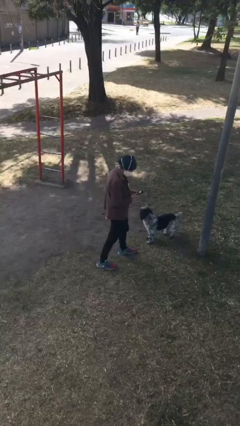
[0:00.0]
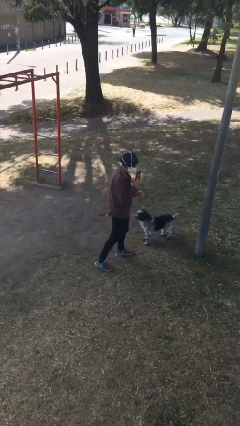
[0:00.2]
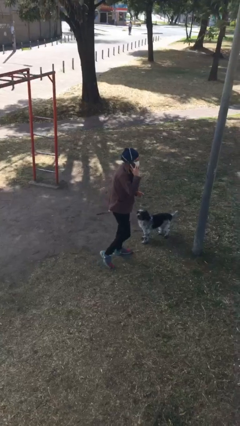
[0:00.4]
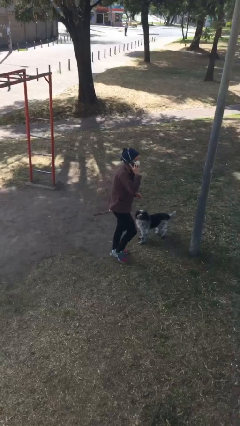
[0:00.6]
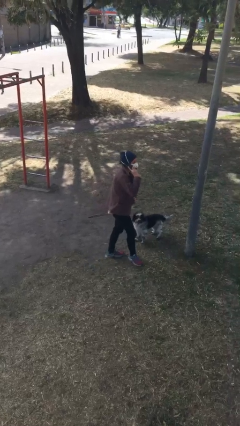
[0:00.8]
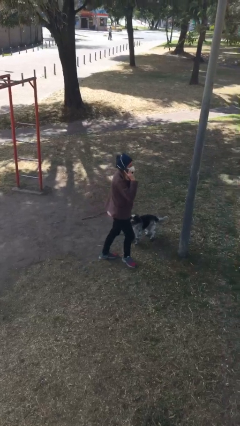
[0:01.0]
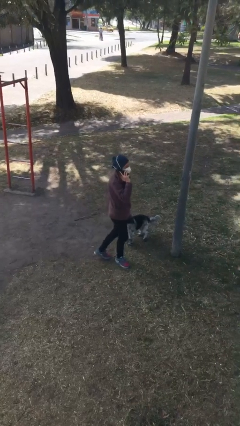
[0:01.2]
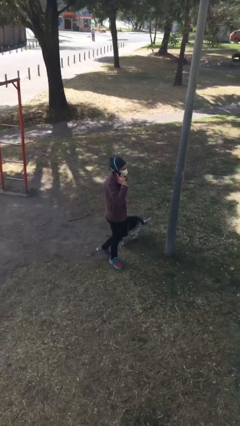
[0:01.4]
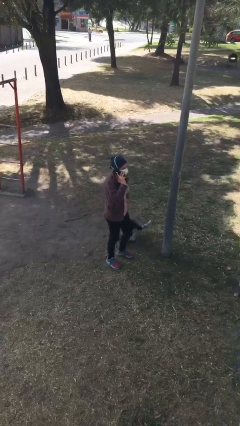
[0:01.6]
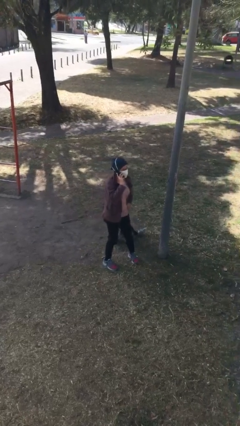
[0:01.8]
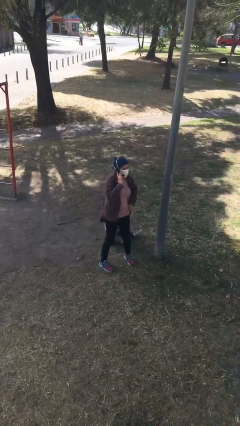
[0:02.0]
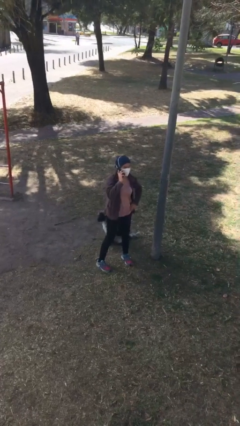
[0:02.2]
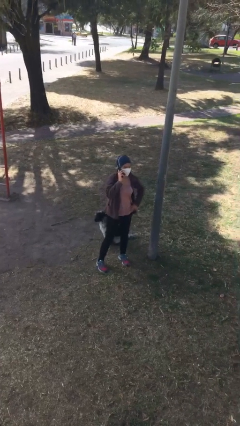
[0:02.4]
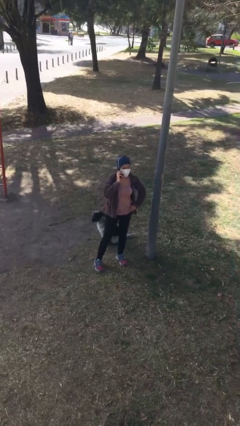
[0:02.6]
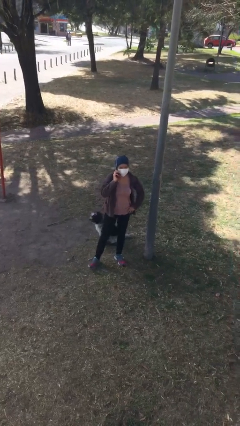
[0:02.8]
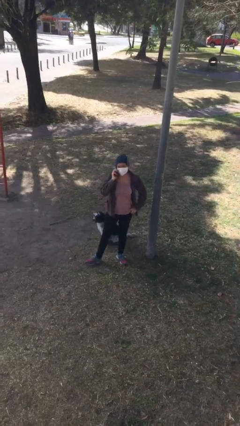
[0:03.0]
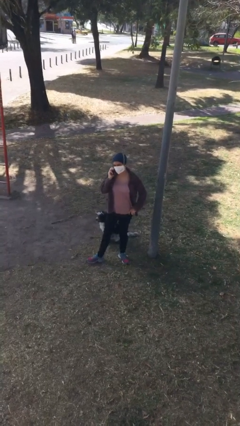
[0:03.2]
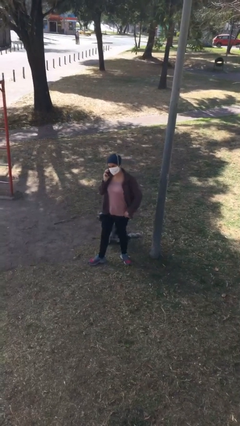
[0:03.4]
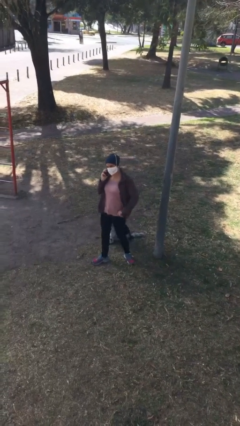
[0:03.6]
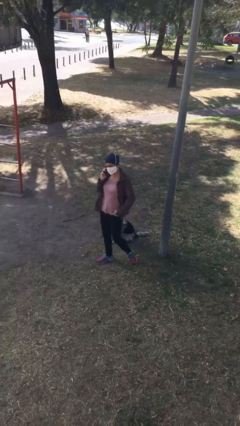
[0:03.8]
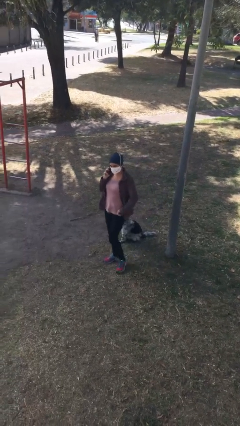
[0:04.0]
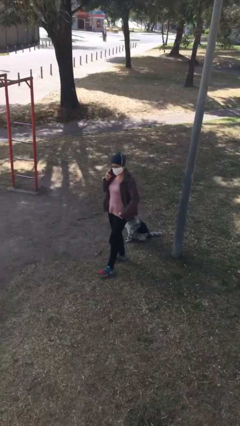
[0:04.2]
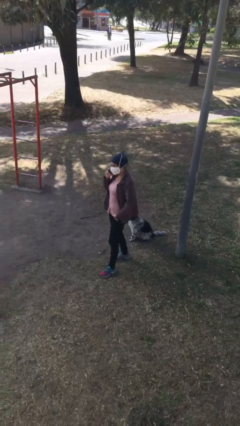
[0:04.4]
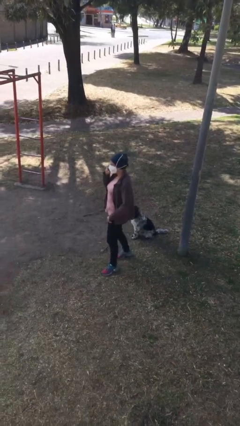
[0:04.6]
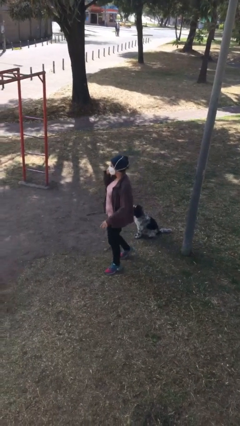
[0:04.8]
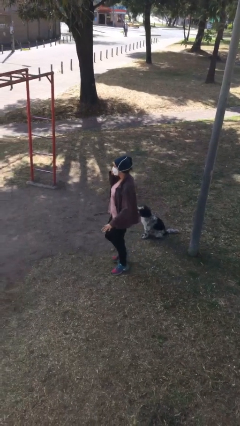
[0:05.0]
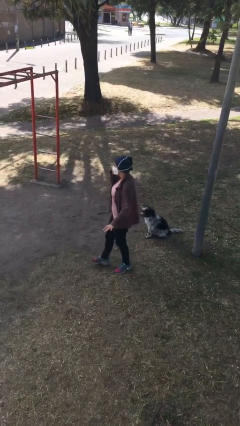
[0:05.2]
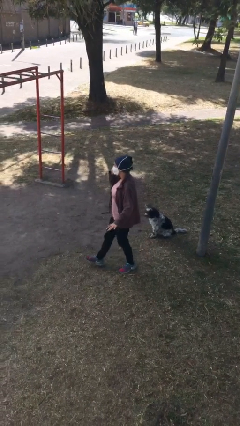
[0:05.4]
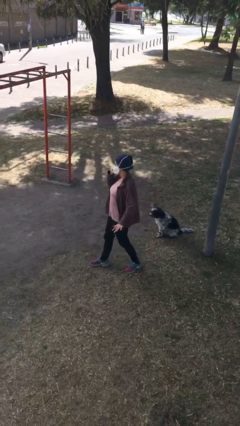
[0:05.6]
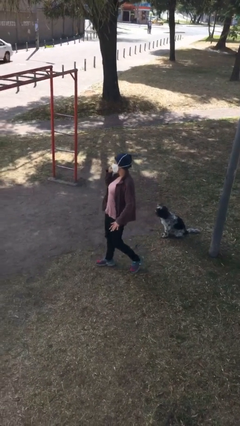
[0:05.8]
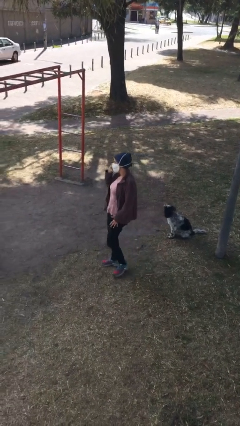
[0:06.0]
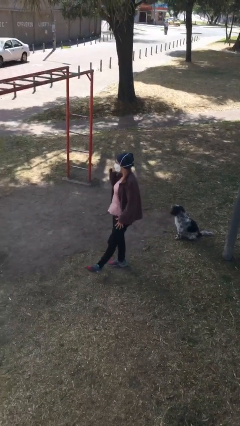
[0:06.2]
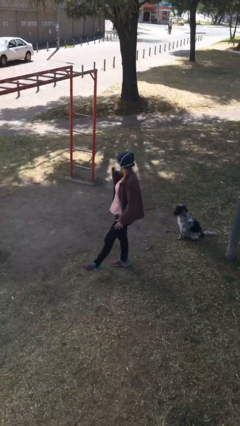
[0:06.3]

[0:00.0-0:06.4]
person talks on phone

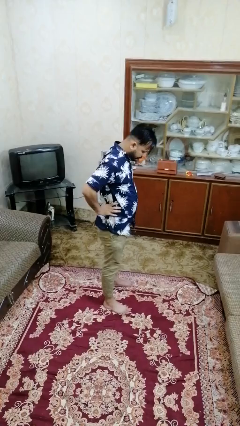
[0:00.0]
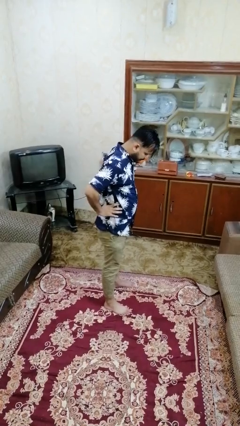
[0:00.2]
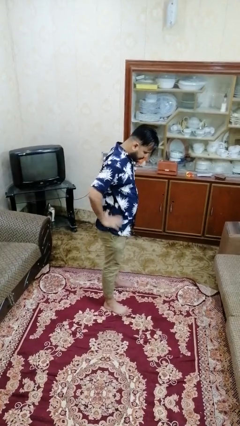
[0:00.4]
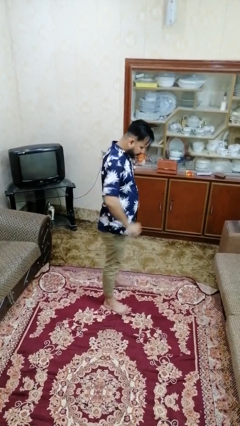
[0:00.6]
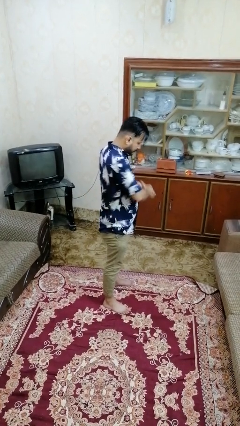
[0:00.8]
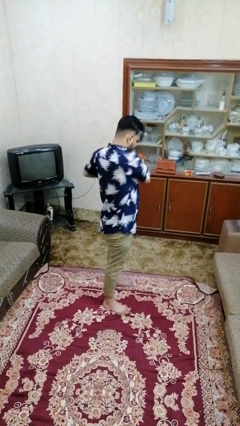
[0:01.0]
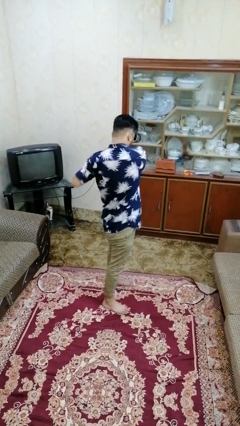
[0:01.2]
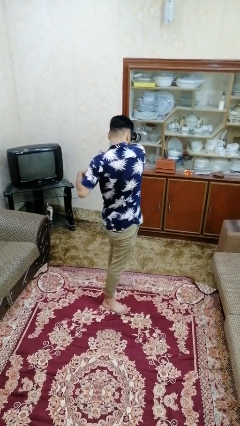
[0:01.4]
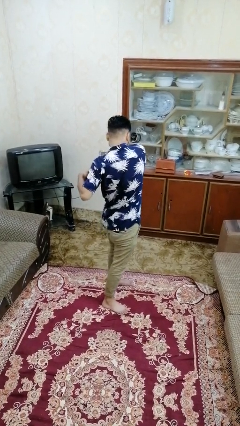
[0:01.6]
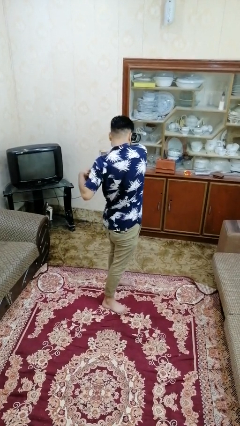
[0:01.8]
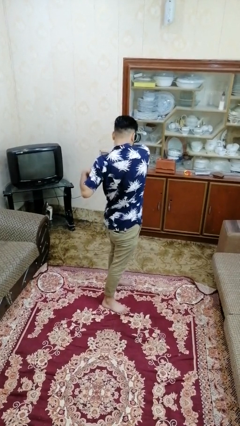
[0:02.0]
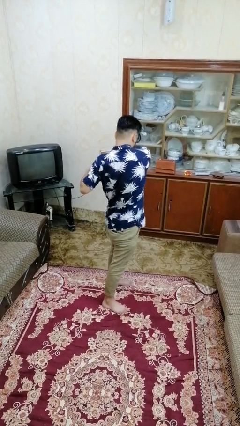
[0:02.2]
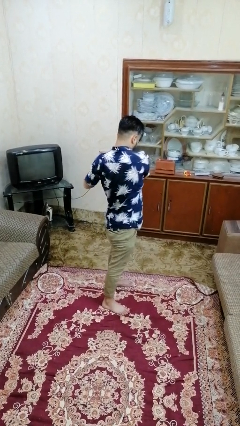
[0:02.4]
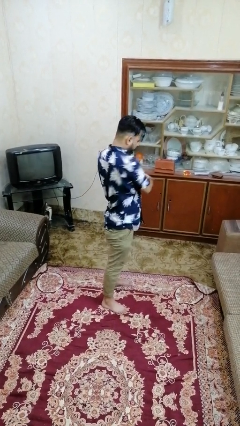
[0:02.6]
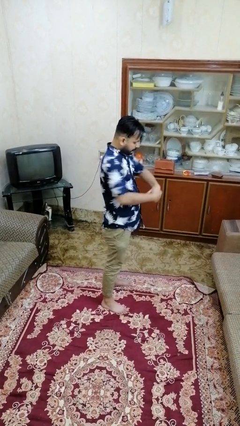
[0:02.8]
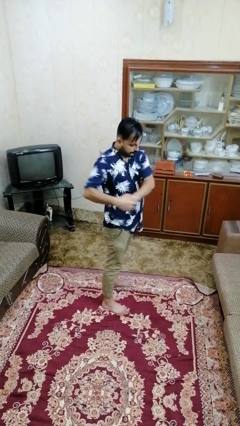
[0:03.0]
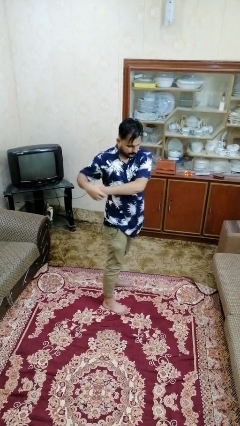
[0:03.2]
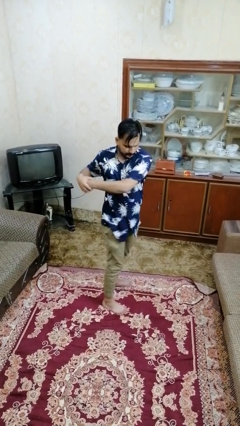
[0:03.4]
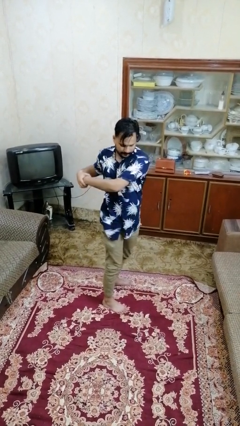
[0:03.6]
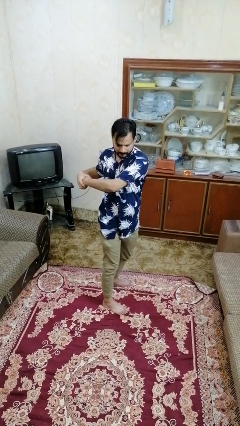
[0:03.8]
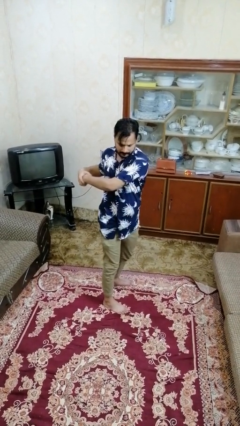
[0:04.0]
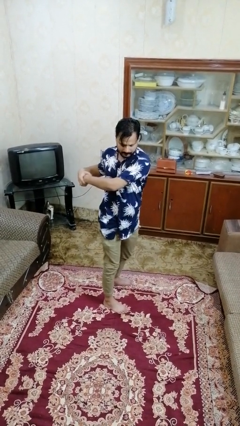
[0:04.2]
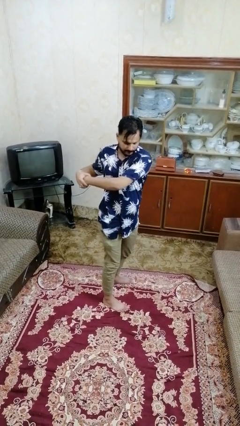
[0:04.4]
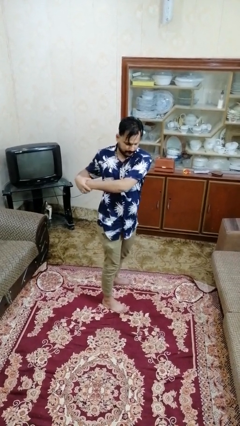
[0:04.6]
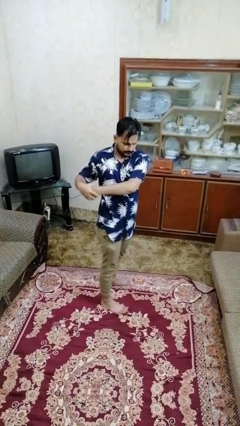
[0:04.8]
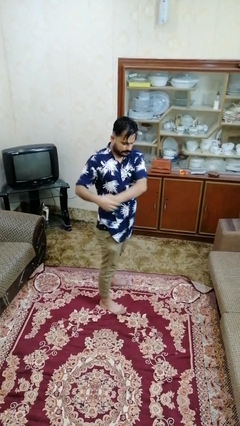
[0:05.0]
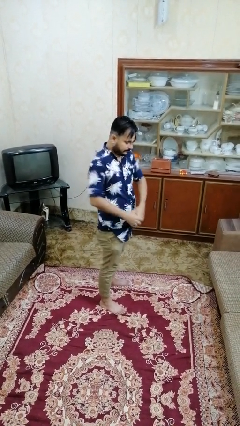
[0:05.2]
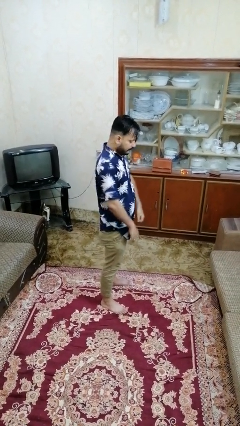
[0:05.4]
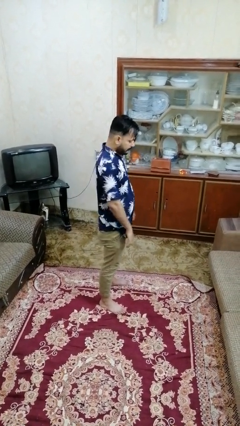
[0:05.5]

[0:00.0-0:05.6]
person stretches arms to side

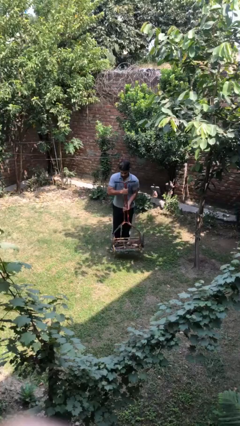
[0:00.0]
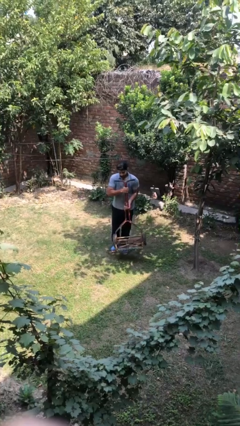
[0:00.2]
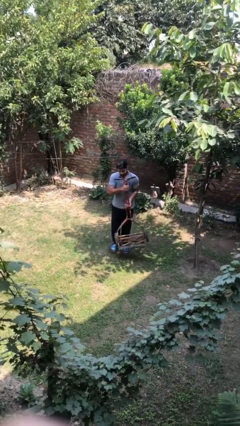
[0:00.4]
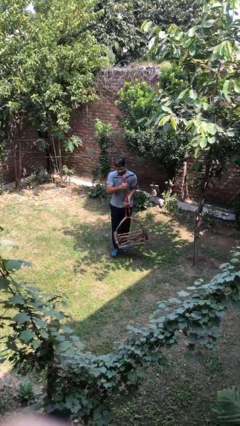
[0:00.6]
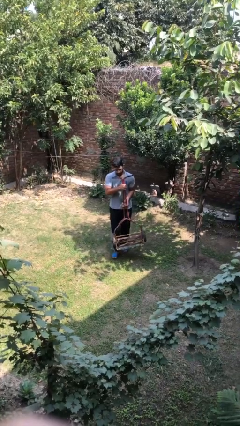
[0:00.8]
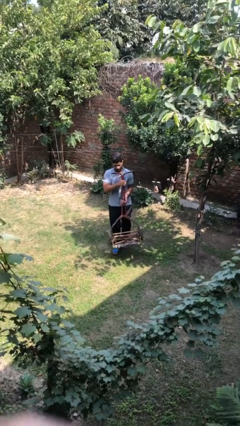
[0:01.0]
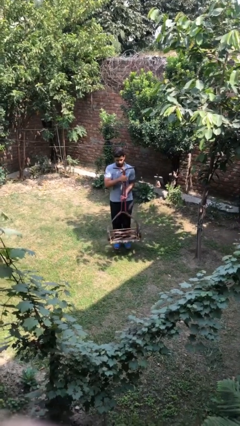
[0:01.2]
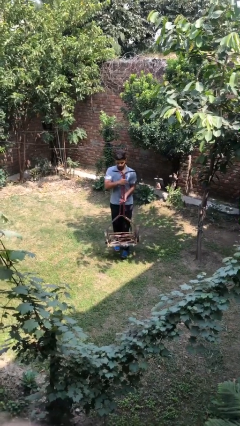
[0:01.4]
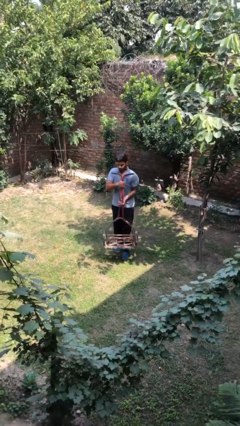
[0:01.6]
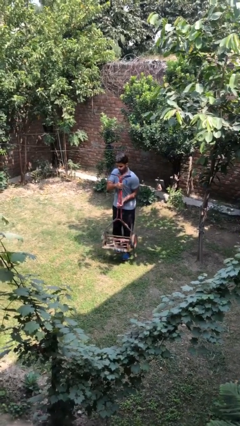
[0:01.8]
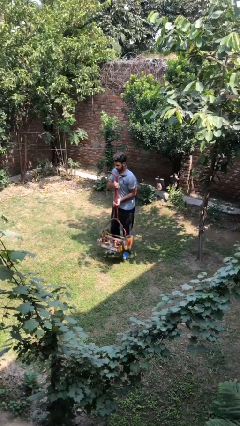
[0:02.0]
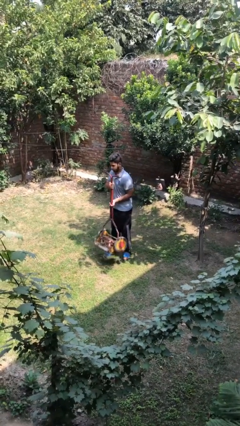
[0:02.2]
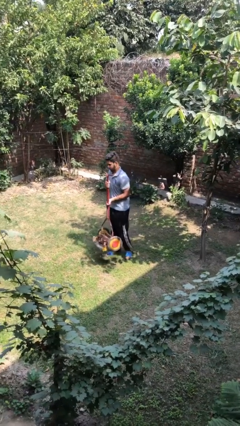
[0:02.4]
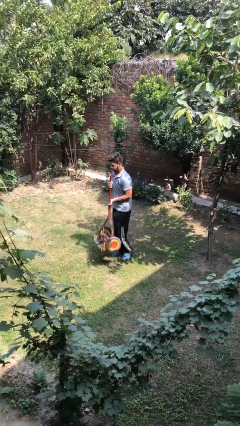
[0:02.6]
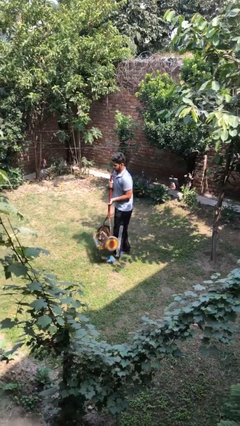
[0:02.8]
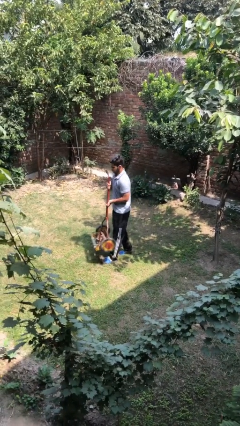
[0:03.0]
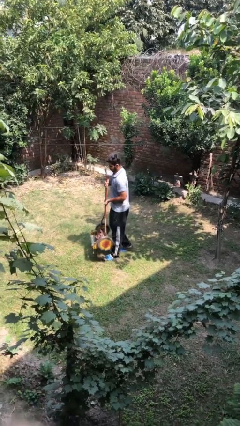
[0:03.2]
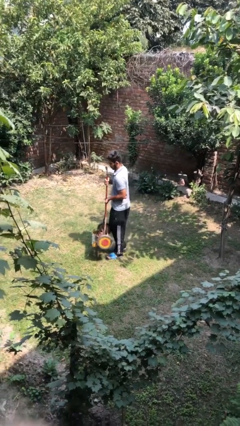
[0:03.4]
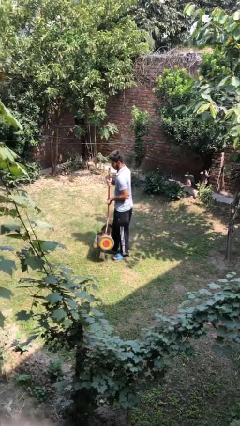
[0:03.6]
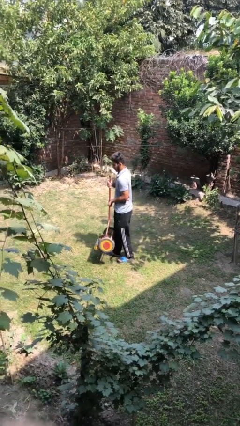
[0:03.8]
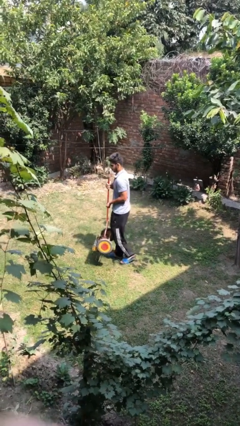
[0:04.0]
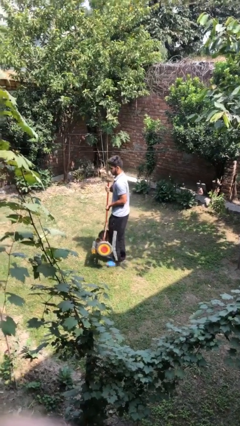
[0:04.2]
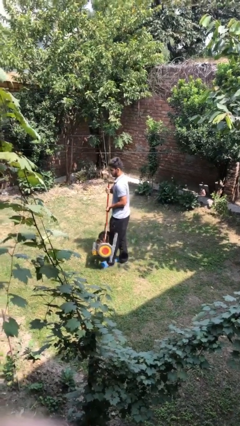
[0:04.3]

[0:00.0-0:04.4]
person carries heavy object

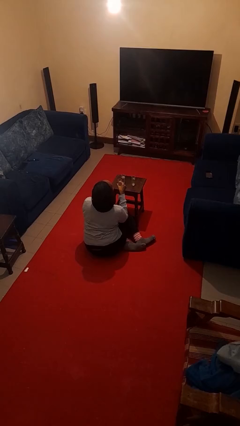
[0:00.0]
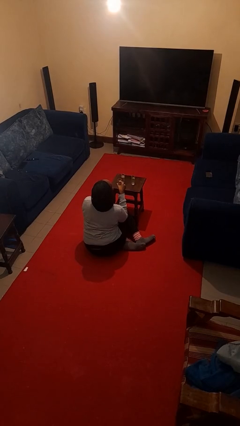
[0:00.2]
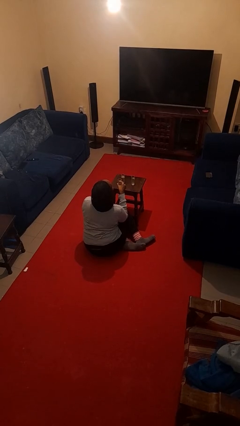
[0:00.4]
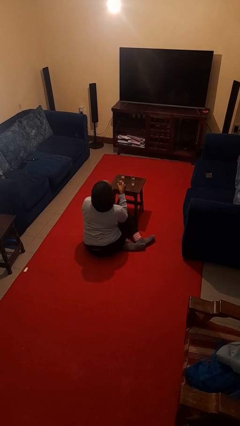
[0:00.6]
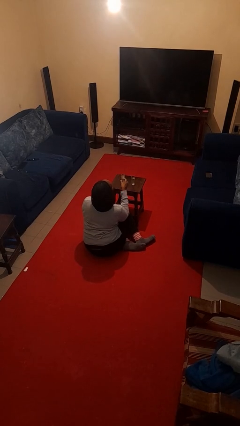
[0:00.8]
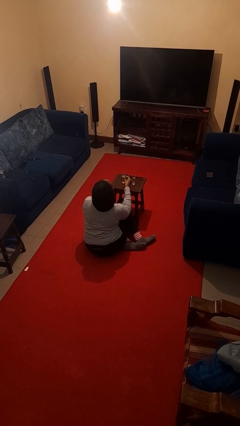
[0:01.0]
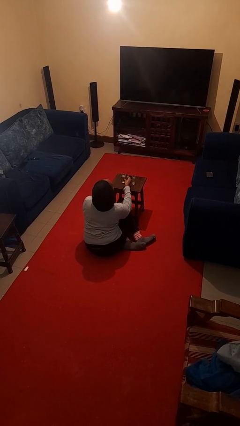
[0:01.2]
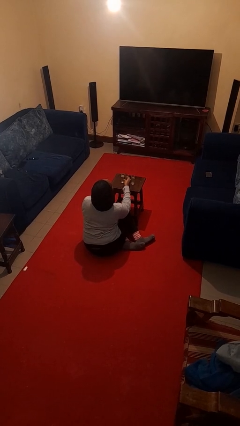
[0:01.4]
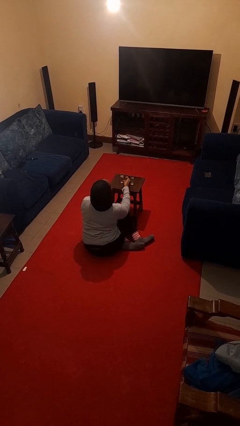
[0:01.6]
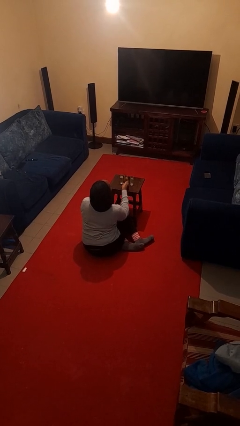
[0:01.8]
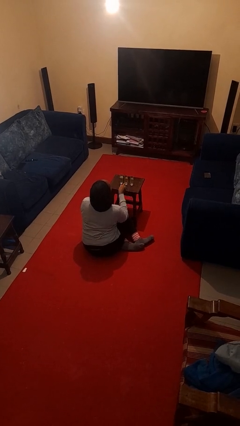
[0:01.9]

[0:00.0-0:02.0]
person puts down object on table
